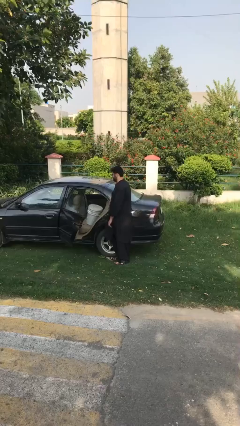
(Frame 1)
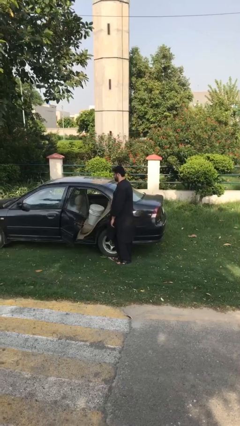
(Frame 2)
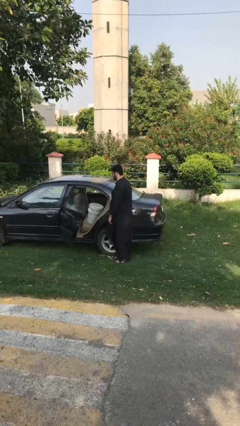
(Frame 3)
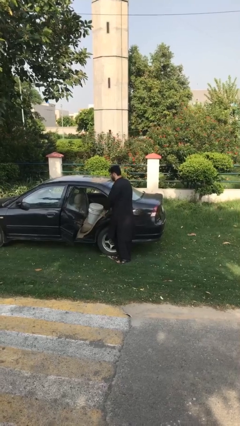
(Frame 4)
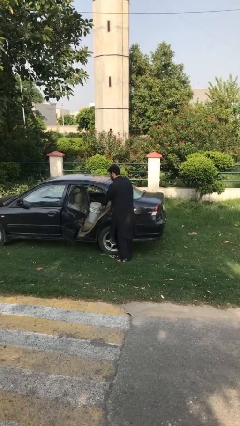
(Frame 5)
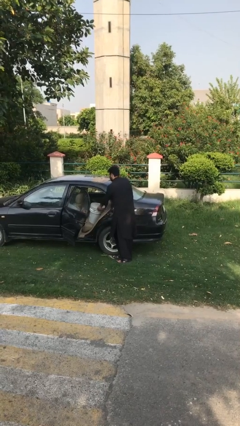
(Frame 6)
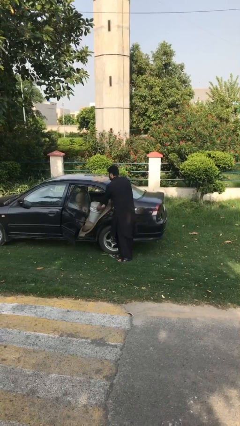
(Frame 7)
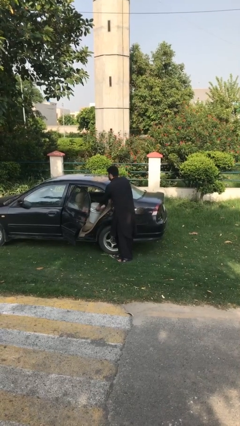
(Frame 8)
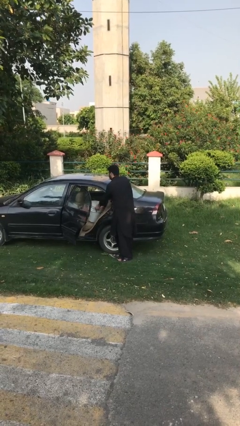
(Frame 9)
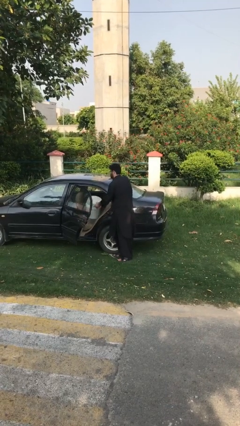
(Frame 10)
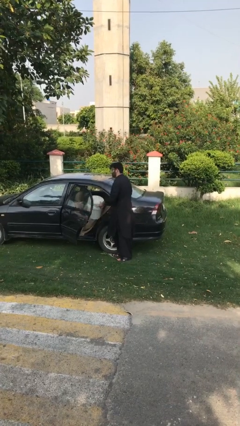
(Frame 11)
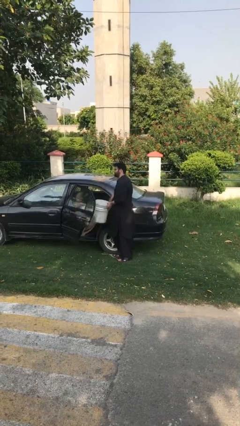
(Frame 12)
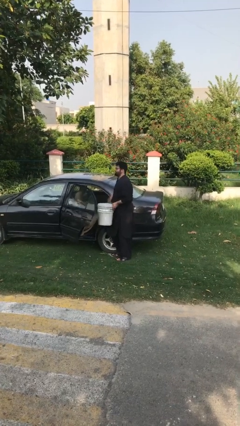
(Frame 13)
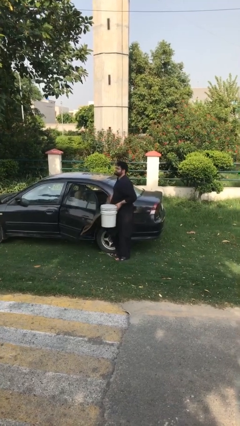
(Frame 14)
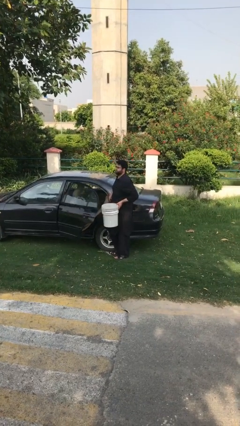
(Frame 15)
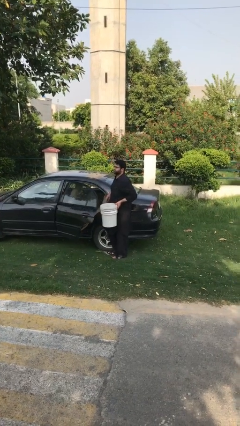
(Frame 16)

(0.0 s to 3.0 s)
person unloads car

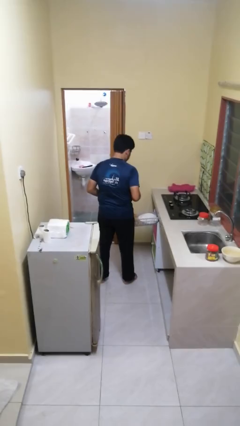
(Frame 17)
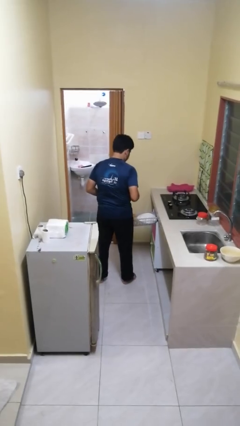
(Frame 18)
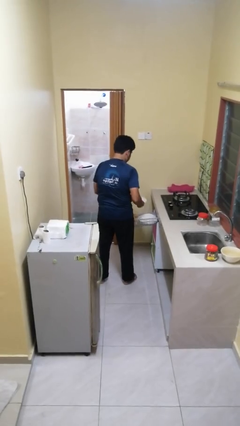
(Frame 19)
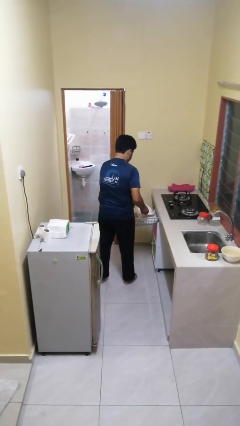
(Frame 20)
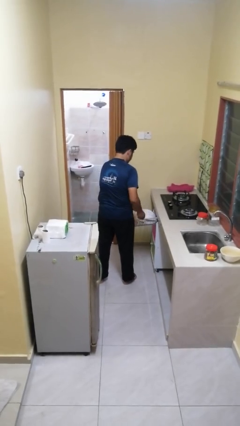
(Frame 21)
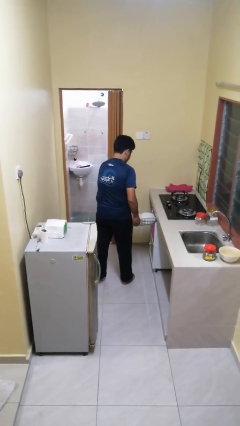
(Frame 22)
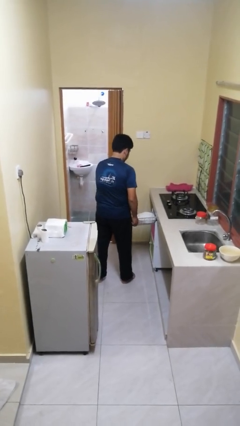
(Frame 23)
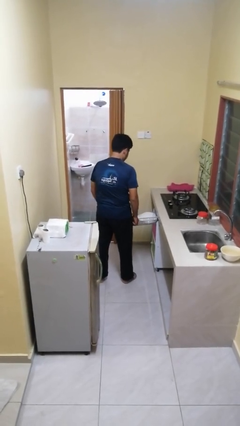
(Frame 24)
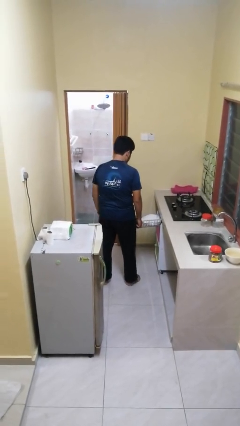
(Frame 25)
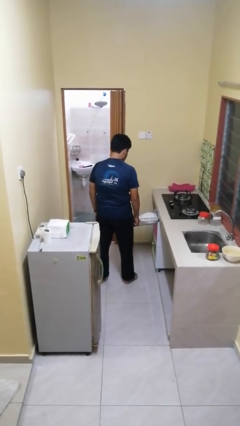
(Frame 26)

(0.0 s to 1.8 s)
person puts object into kitchen drawer

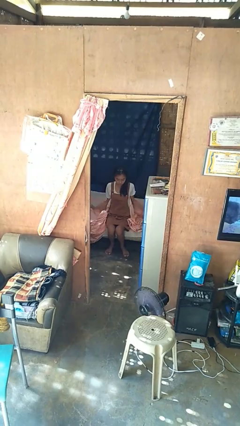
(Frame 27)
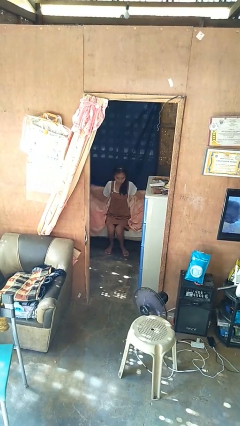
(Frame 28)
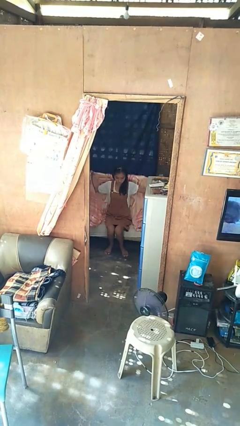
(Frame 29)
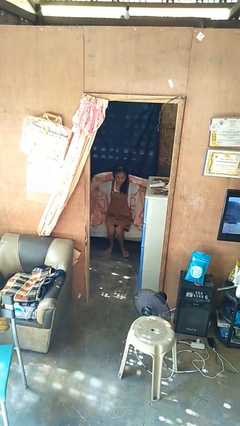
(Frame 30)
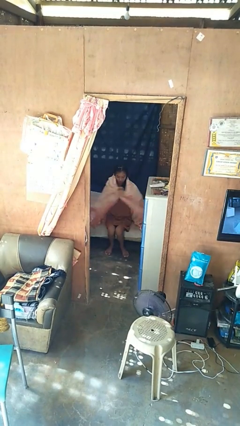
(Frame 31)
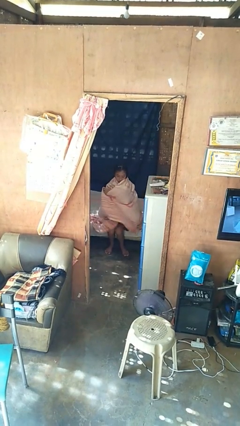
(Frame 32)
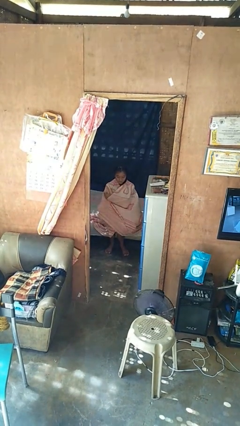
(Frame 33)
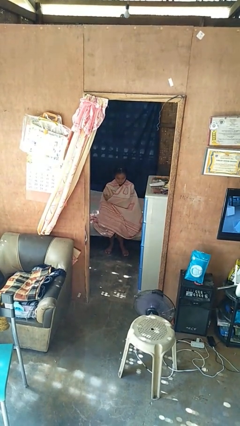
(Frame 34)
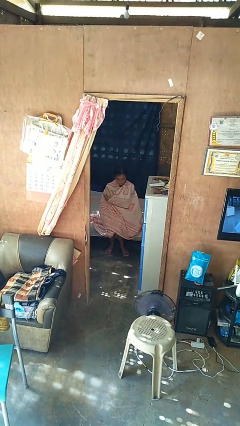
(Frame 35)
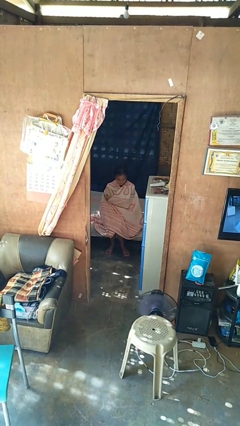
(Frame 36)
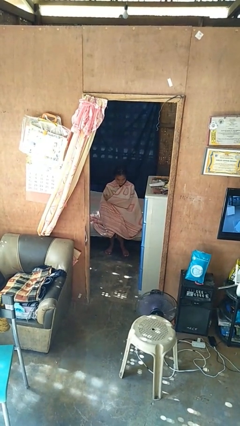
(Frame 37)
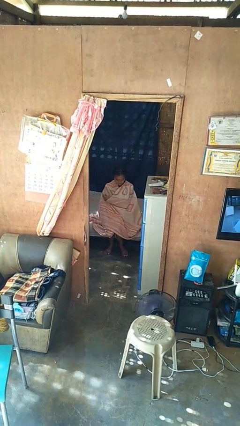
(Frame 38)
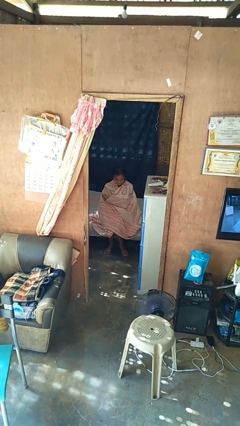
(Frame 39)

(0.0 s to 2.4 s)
person covers with blanket

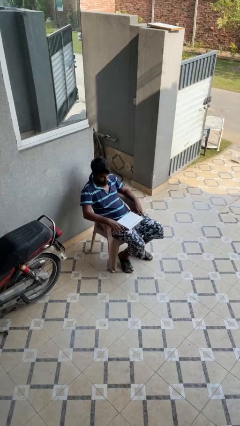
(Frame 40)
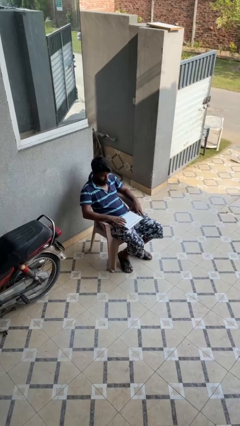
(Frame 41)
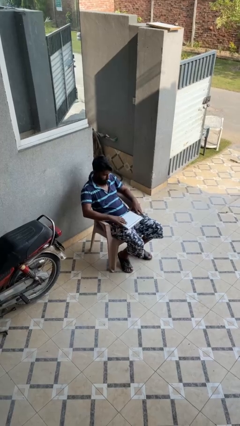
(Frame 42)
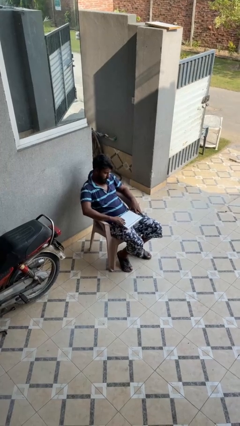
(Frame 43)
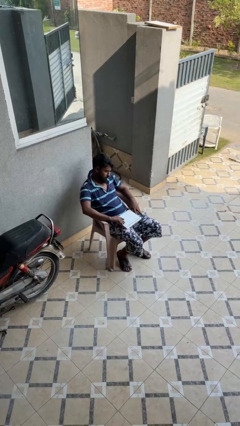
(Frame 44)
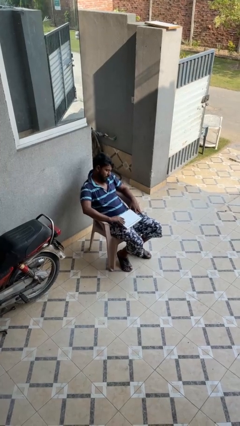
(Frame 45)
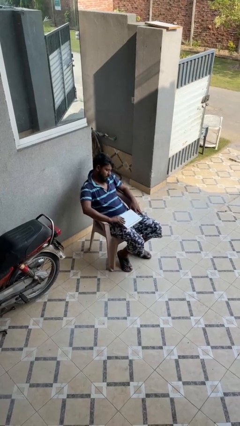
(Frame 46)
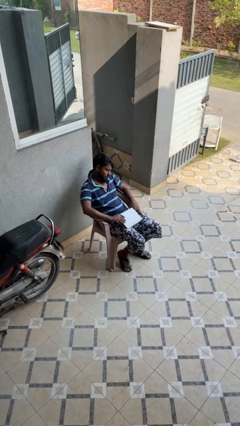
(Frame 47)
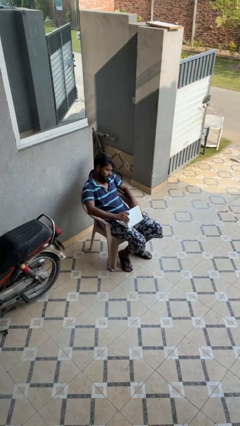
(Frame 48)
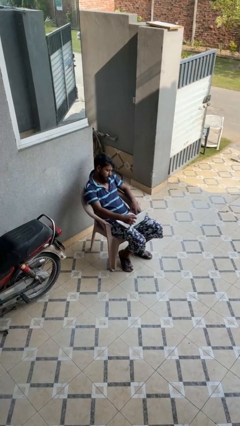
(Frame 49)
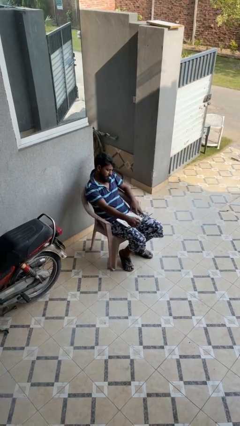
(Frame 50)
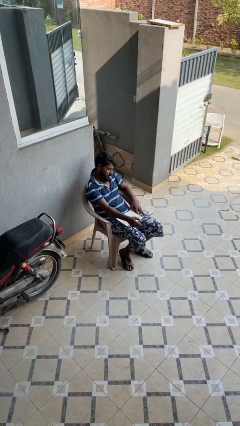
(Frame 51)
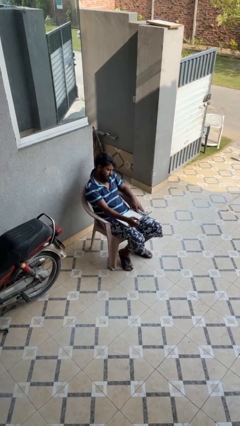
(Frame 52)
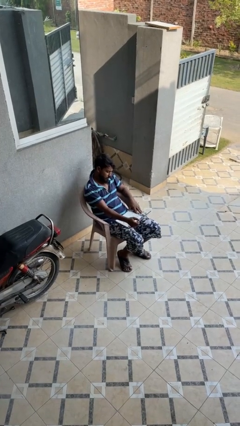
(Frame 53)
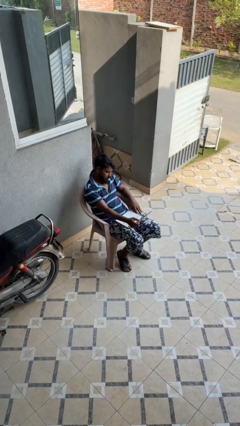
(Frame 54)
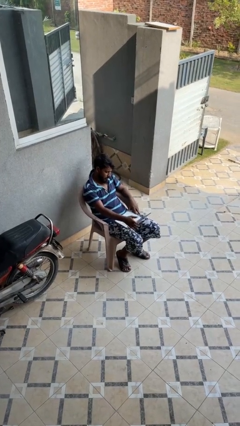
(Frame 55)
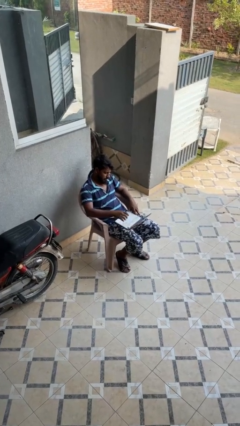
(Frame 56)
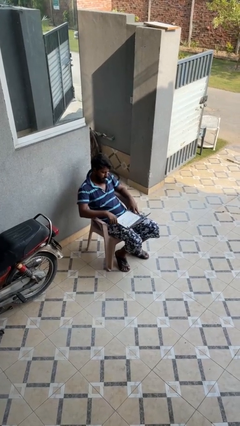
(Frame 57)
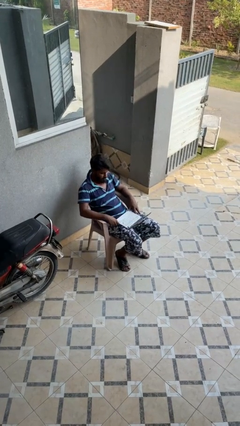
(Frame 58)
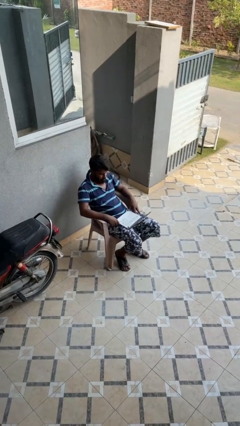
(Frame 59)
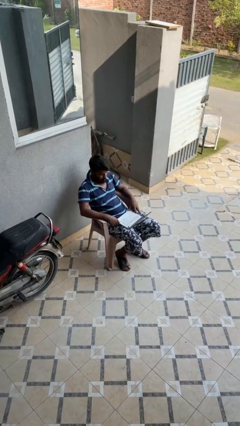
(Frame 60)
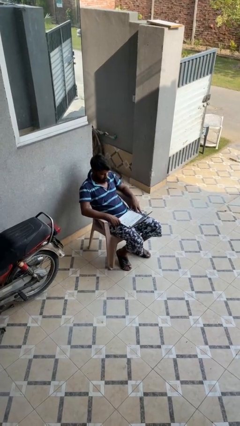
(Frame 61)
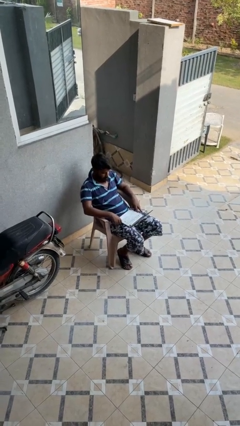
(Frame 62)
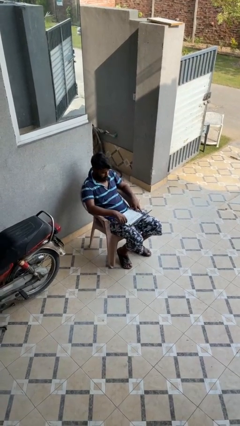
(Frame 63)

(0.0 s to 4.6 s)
person opens laptop

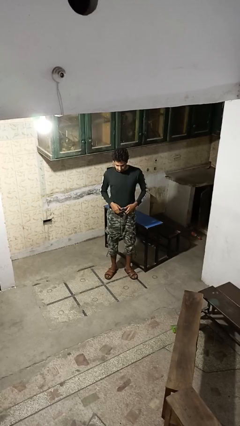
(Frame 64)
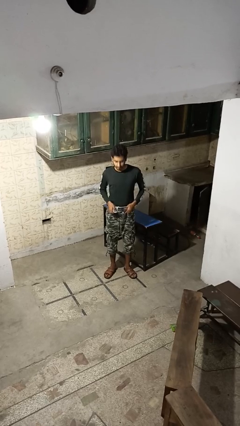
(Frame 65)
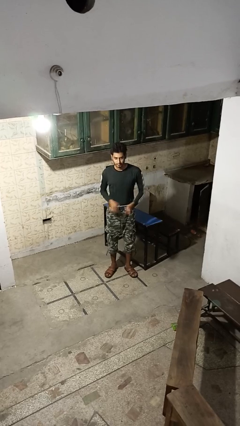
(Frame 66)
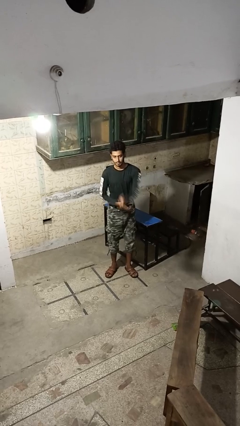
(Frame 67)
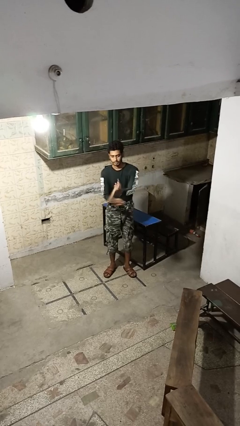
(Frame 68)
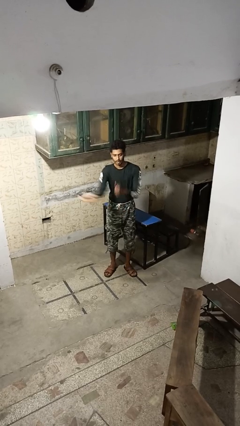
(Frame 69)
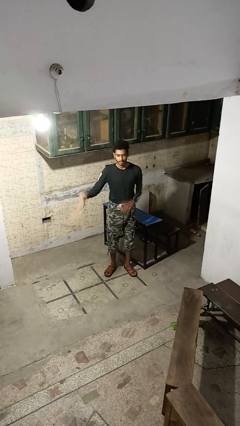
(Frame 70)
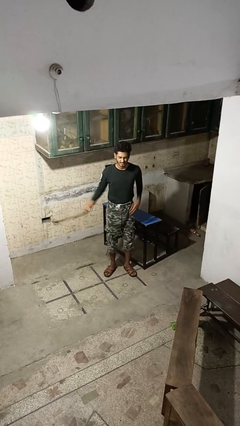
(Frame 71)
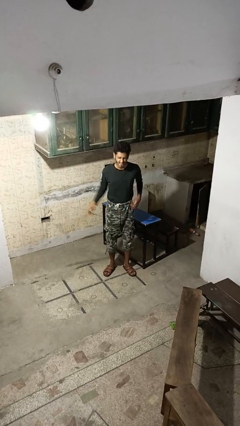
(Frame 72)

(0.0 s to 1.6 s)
person takes off belt

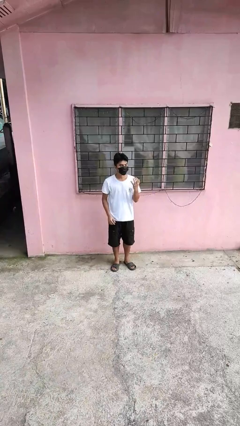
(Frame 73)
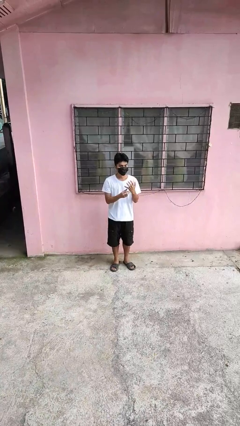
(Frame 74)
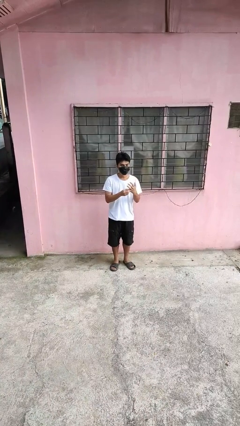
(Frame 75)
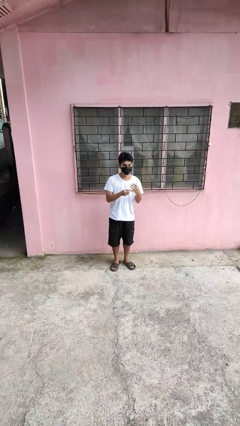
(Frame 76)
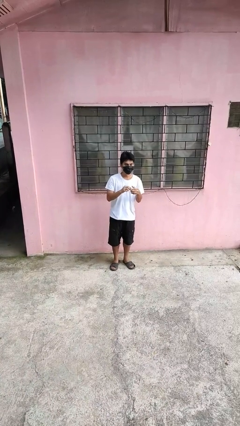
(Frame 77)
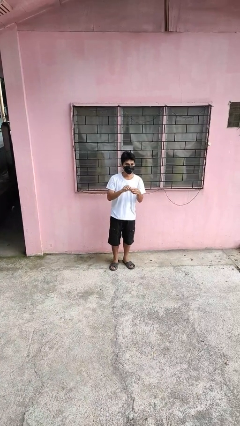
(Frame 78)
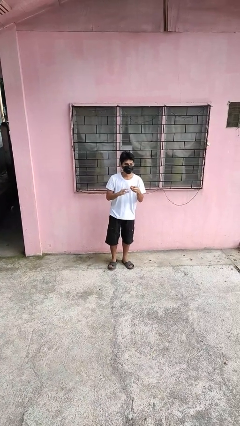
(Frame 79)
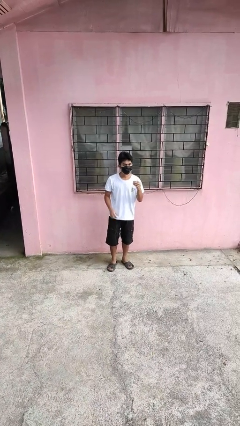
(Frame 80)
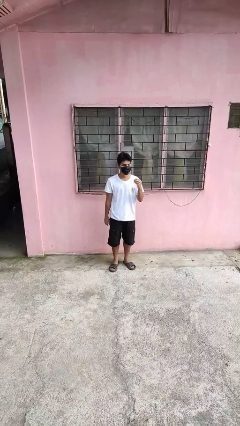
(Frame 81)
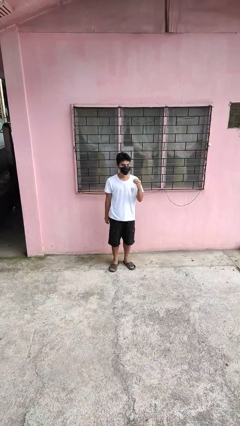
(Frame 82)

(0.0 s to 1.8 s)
person takes off ring

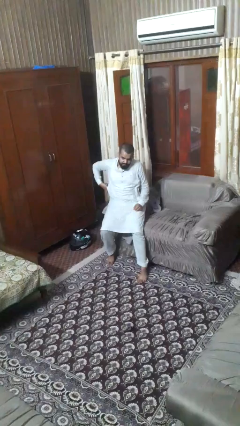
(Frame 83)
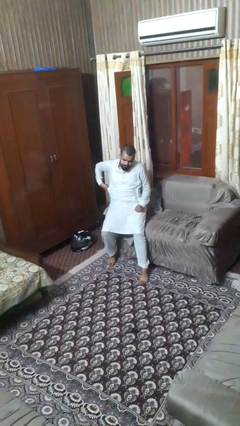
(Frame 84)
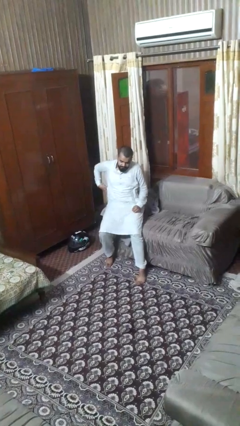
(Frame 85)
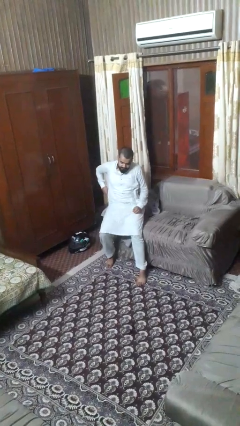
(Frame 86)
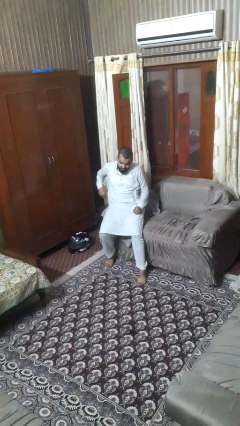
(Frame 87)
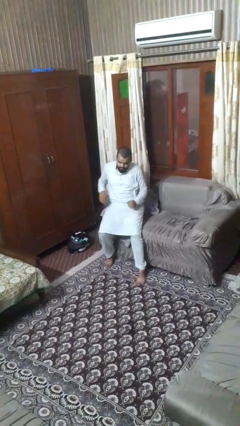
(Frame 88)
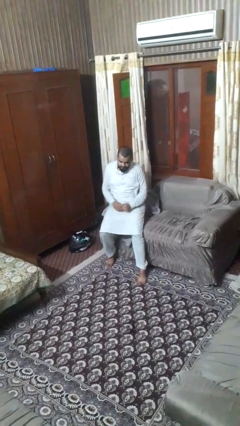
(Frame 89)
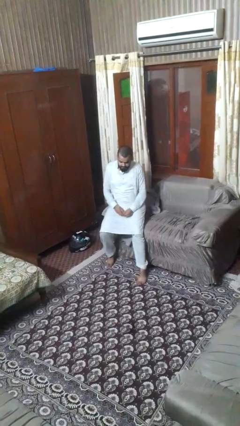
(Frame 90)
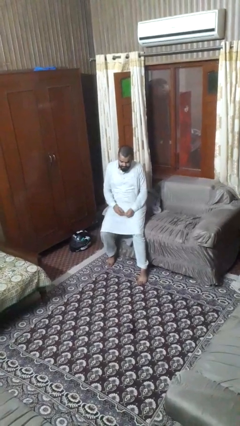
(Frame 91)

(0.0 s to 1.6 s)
person puts phone into pocket
